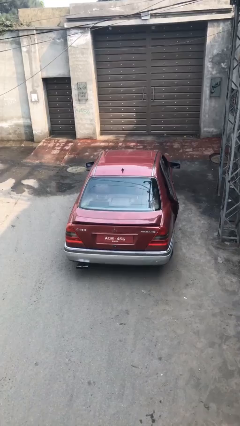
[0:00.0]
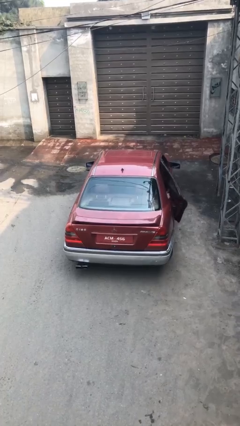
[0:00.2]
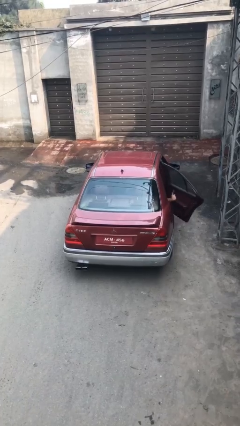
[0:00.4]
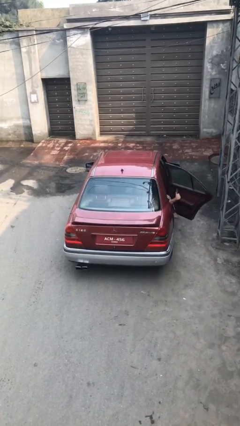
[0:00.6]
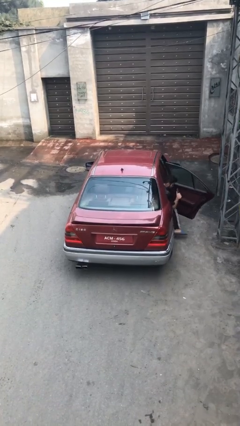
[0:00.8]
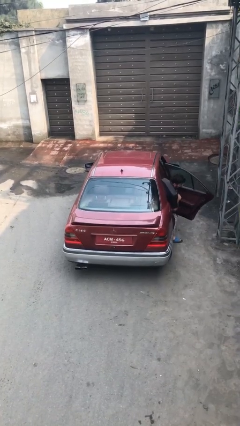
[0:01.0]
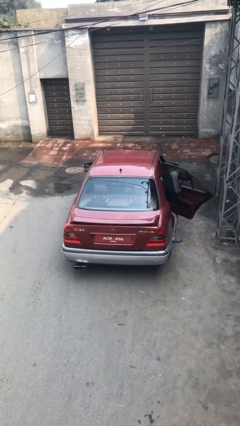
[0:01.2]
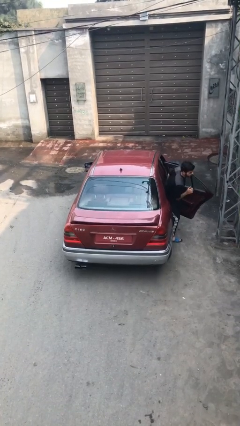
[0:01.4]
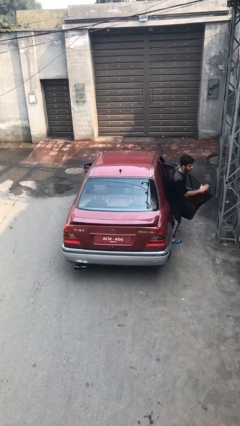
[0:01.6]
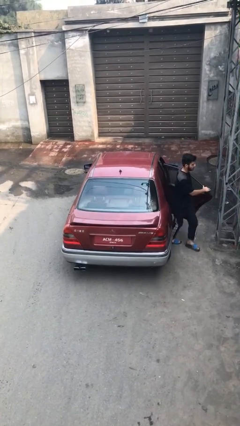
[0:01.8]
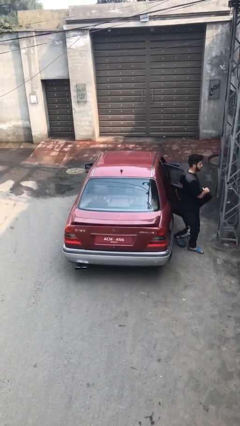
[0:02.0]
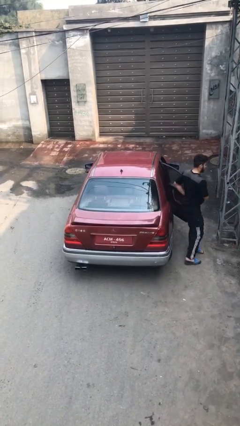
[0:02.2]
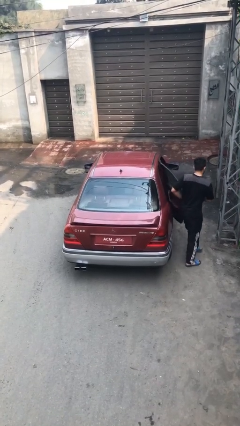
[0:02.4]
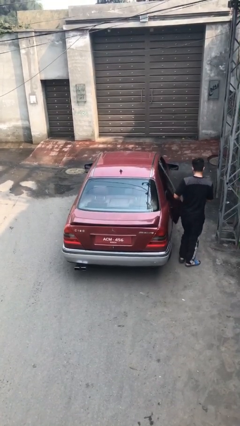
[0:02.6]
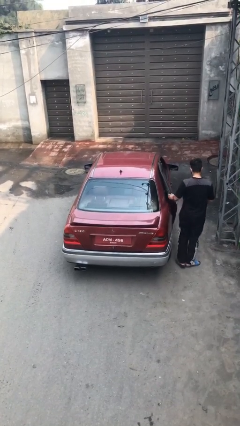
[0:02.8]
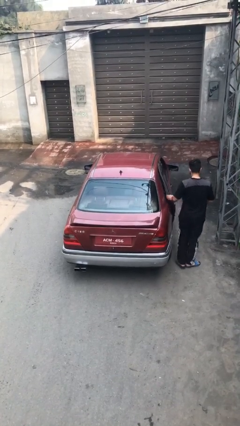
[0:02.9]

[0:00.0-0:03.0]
car drops off person

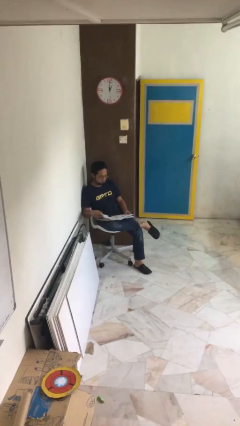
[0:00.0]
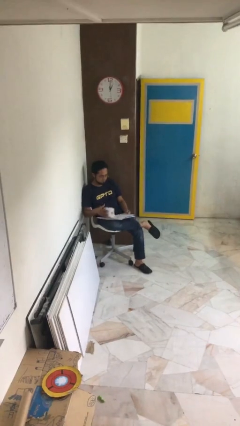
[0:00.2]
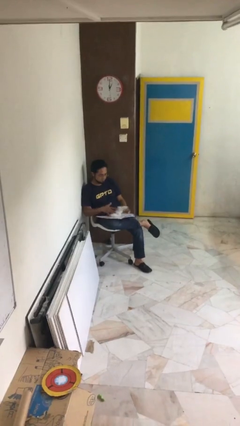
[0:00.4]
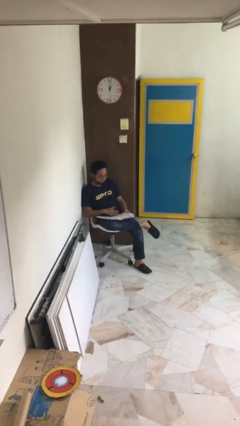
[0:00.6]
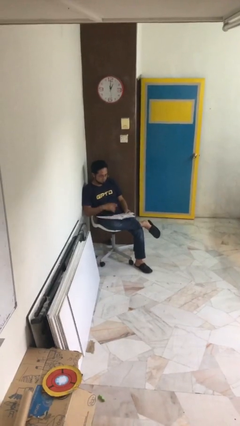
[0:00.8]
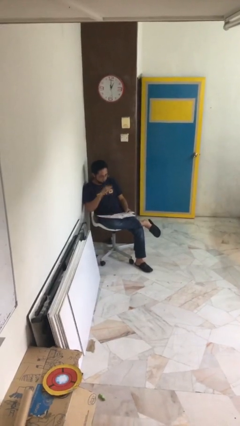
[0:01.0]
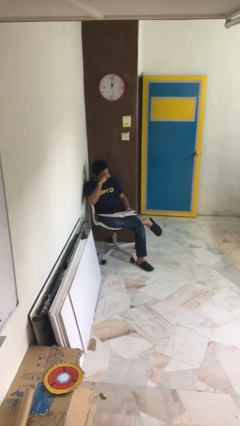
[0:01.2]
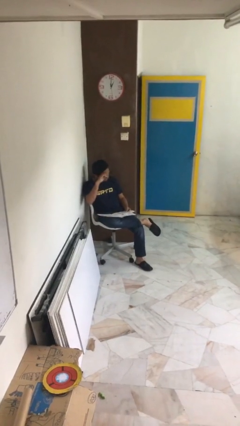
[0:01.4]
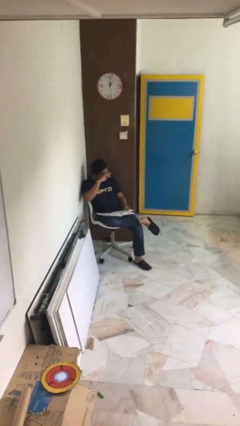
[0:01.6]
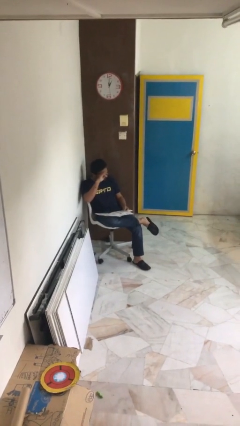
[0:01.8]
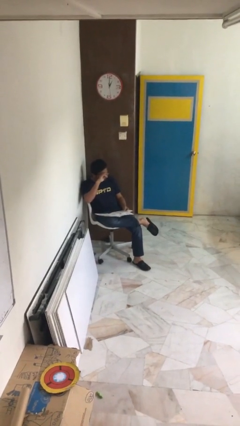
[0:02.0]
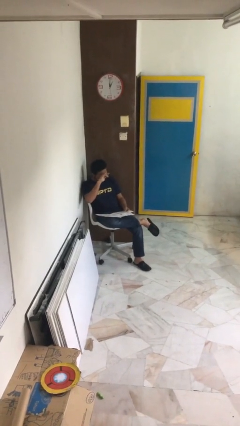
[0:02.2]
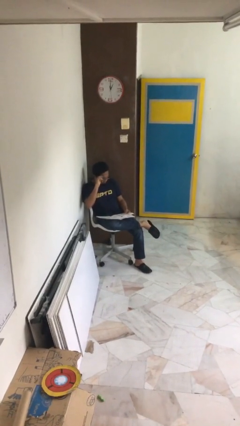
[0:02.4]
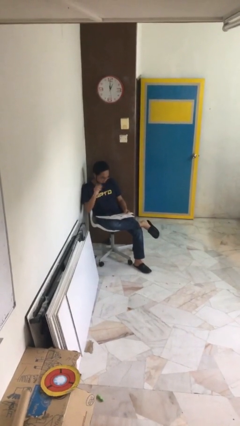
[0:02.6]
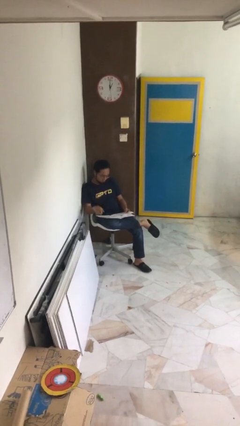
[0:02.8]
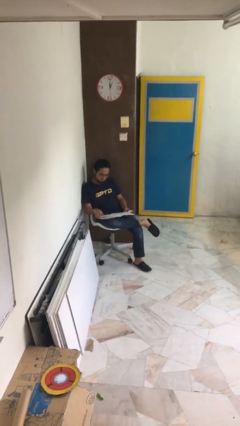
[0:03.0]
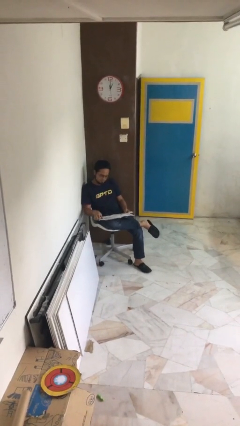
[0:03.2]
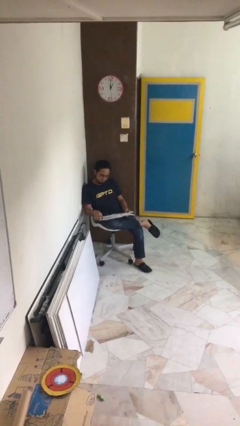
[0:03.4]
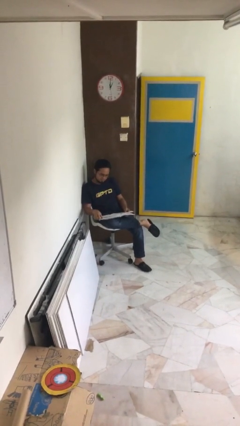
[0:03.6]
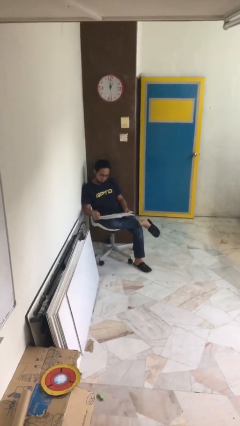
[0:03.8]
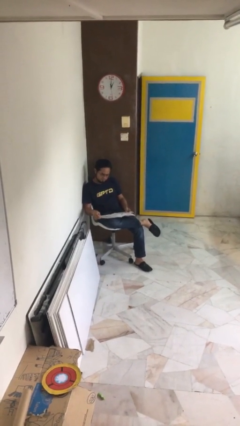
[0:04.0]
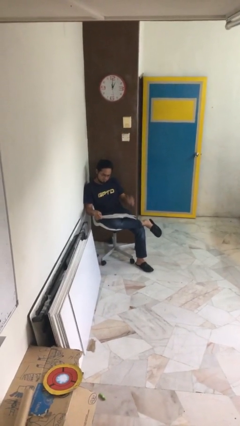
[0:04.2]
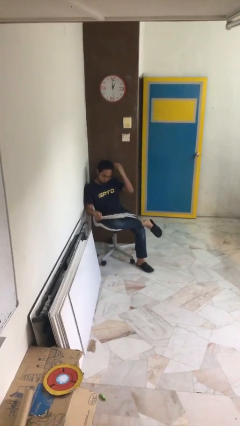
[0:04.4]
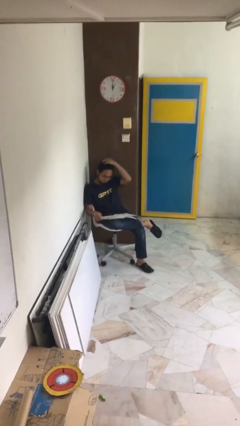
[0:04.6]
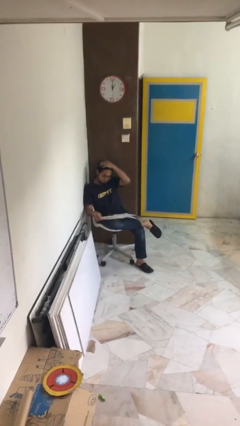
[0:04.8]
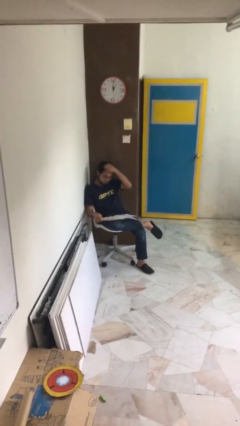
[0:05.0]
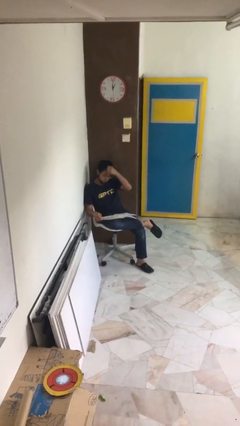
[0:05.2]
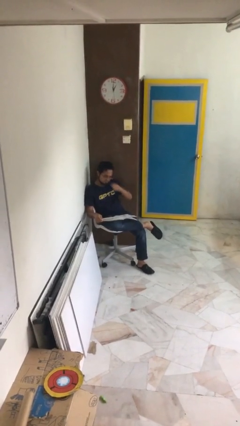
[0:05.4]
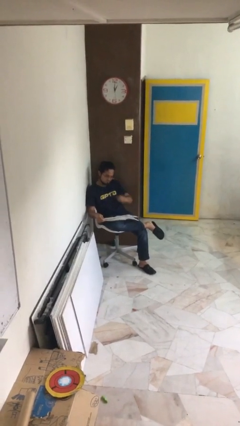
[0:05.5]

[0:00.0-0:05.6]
person reads document

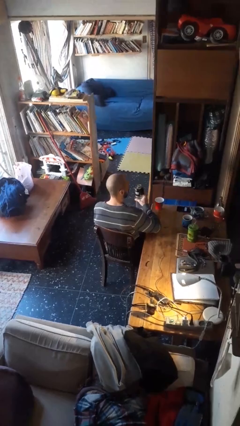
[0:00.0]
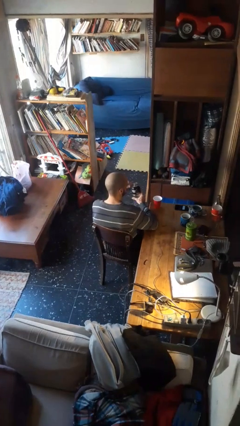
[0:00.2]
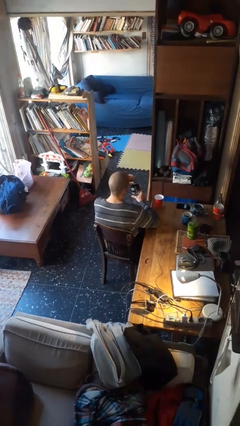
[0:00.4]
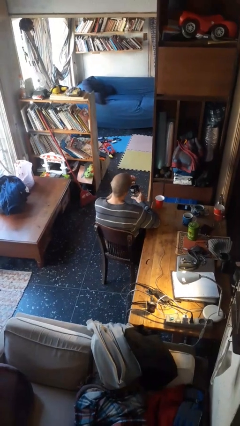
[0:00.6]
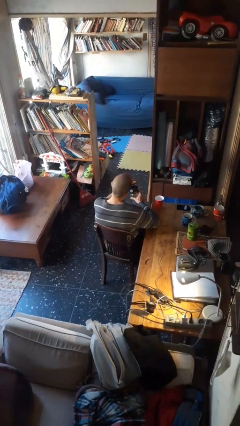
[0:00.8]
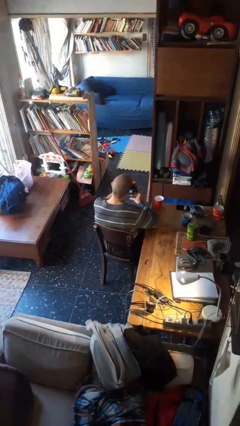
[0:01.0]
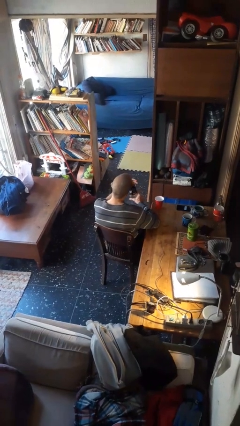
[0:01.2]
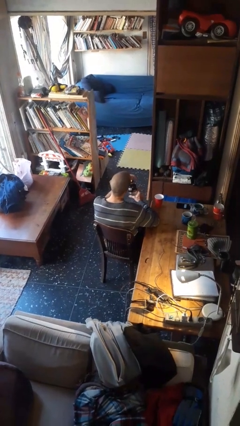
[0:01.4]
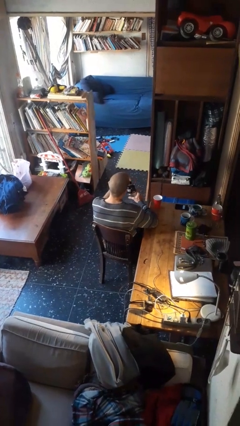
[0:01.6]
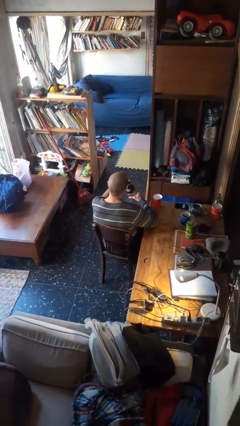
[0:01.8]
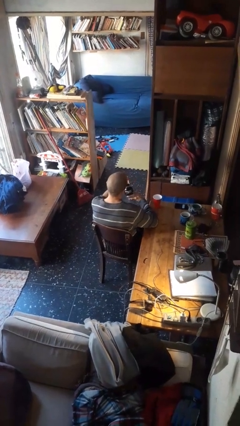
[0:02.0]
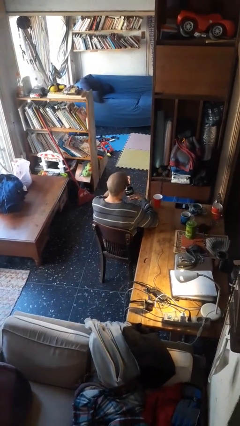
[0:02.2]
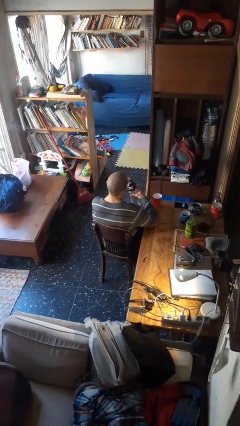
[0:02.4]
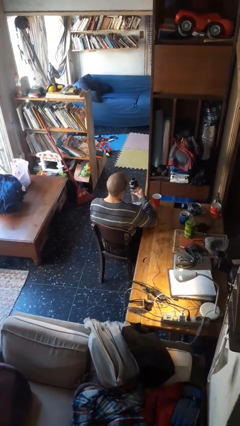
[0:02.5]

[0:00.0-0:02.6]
person screws lid to bottle

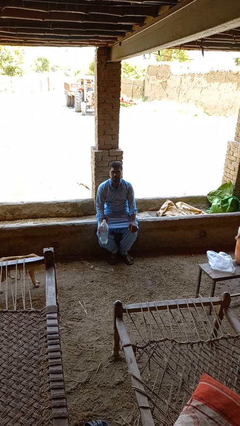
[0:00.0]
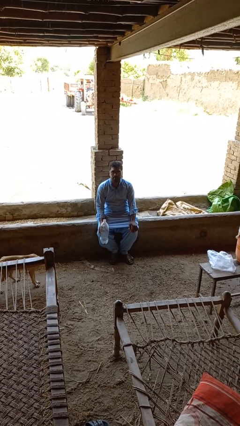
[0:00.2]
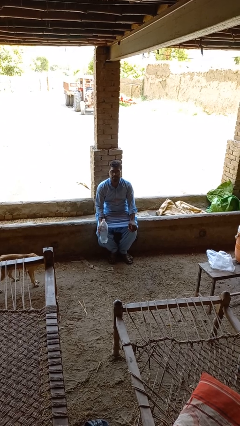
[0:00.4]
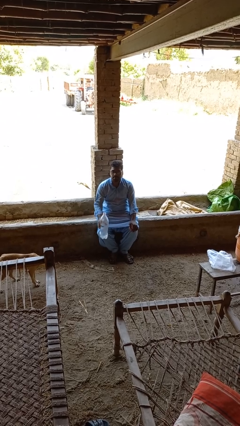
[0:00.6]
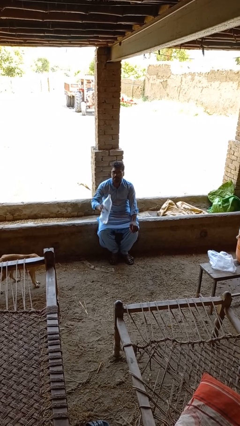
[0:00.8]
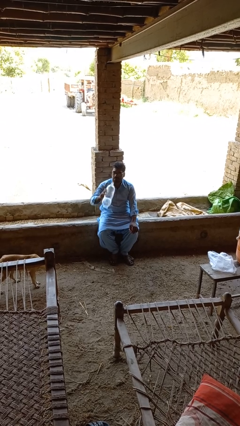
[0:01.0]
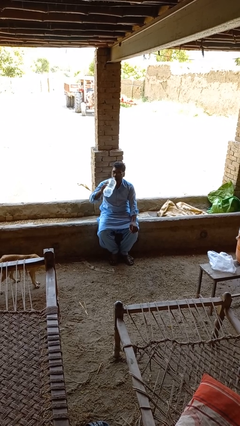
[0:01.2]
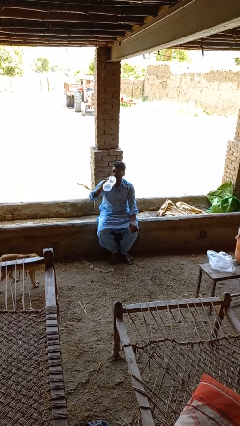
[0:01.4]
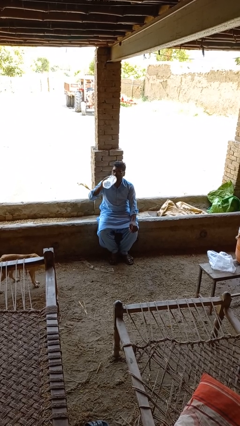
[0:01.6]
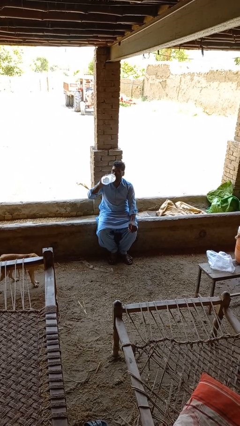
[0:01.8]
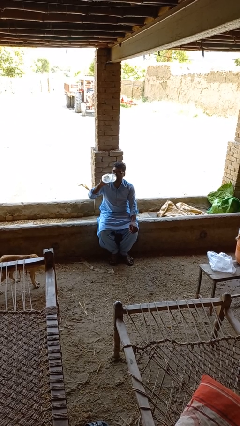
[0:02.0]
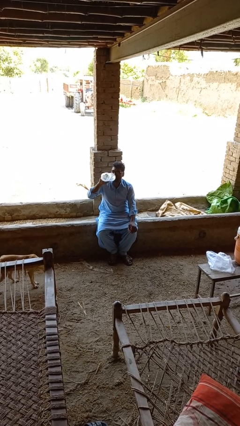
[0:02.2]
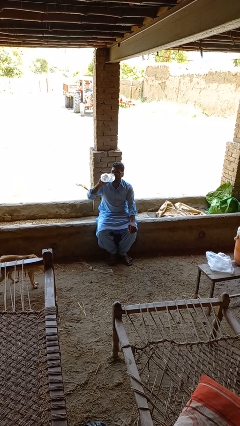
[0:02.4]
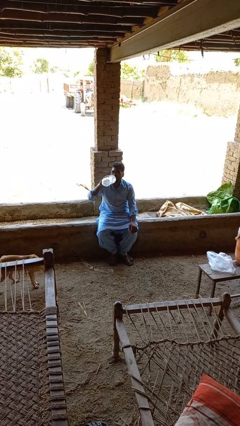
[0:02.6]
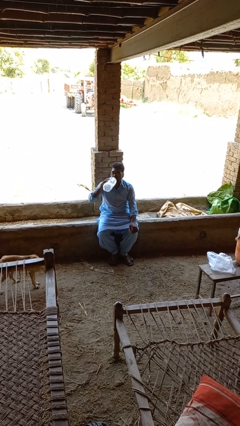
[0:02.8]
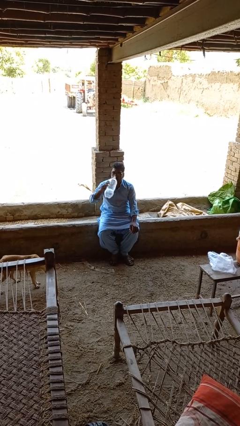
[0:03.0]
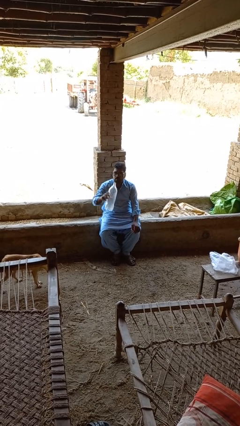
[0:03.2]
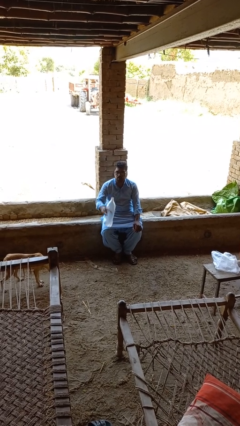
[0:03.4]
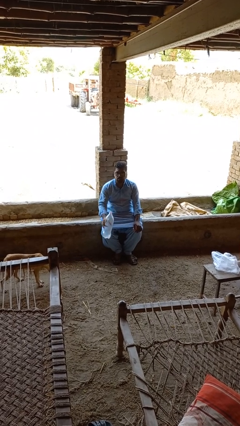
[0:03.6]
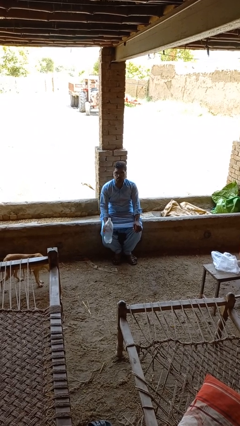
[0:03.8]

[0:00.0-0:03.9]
person drinks from bottle

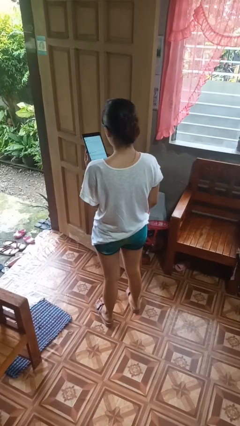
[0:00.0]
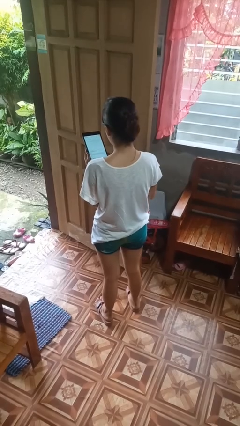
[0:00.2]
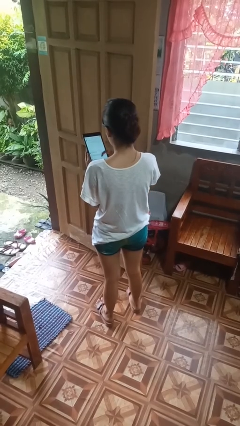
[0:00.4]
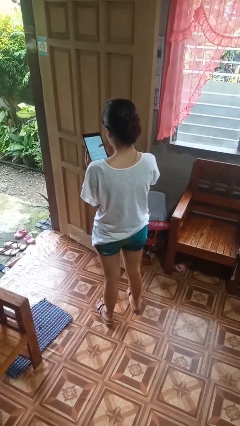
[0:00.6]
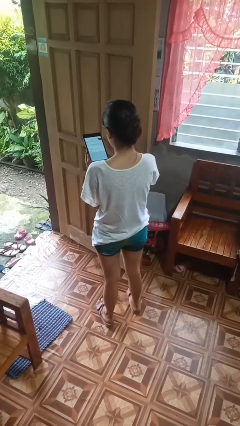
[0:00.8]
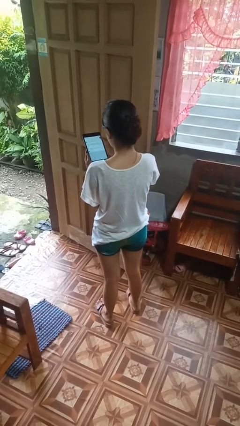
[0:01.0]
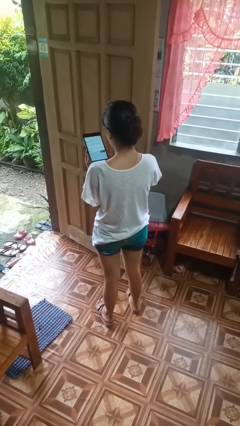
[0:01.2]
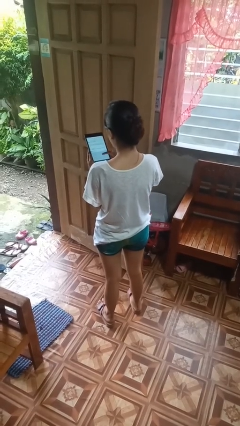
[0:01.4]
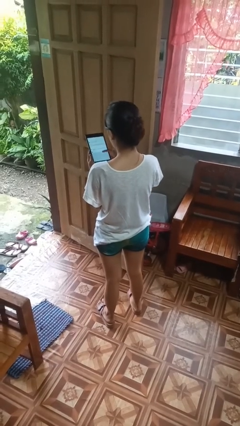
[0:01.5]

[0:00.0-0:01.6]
person interacts with tablet
